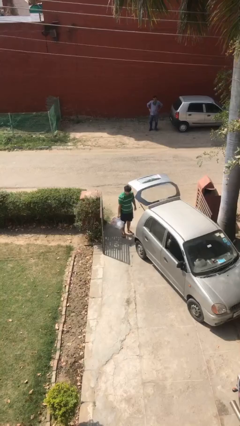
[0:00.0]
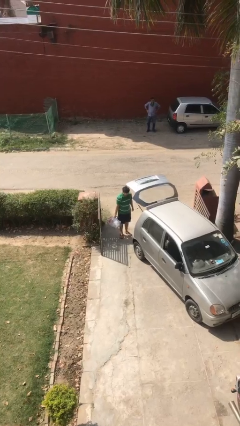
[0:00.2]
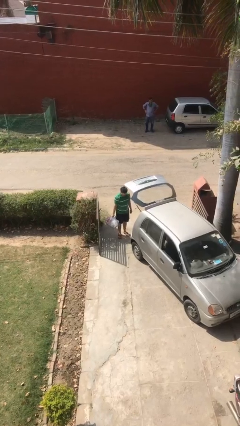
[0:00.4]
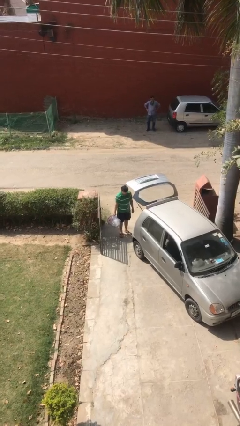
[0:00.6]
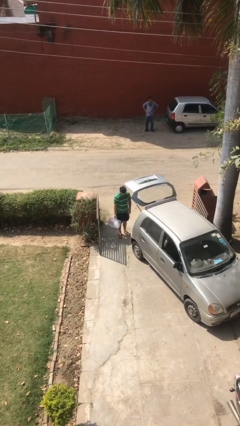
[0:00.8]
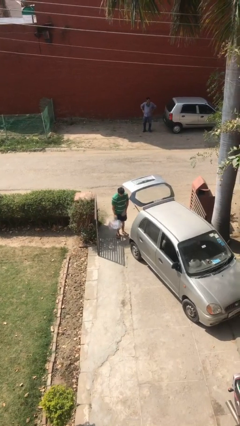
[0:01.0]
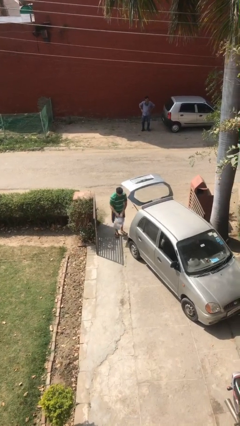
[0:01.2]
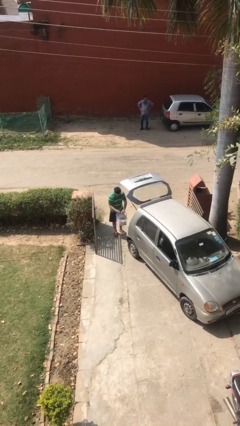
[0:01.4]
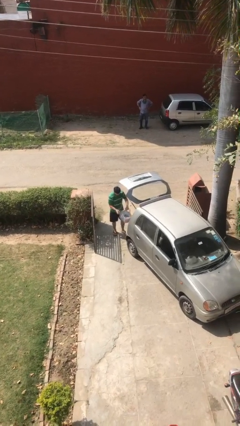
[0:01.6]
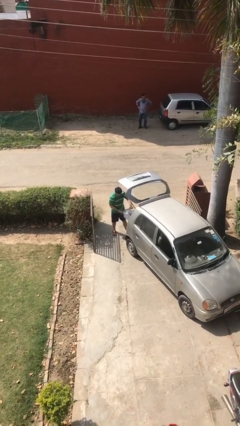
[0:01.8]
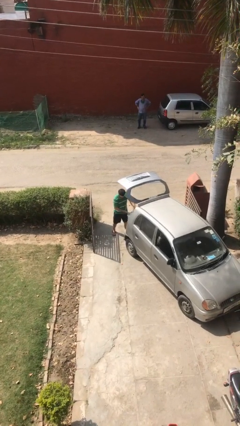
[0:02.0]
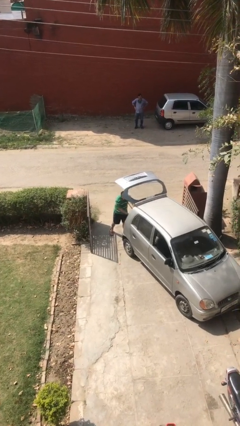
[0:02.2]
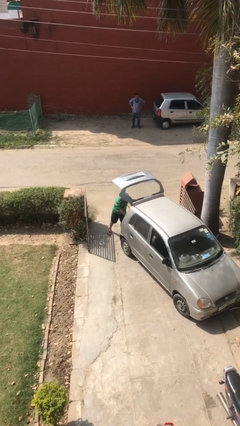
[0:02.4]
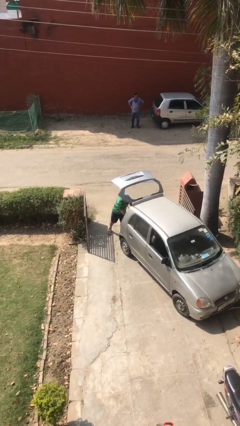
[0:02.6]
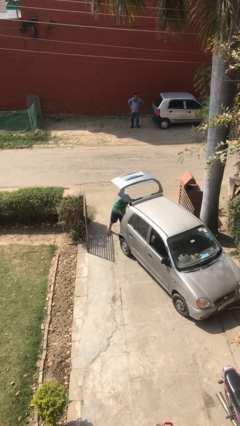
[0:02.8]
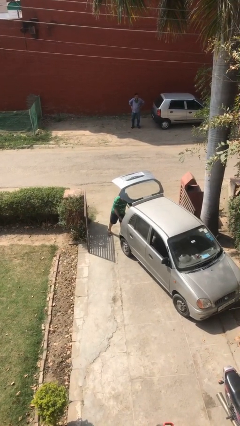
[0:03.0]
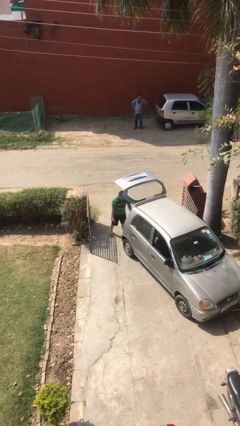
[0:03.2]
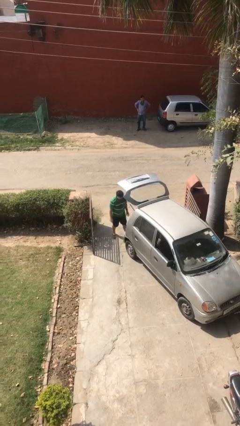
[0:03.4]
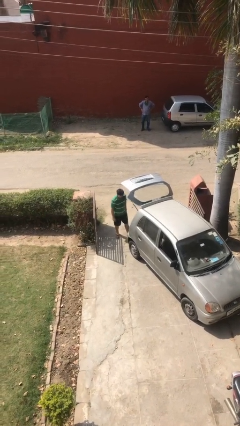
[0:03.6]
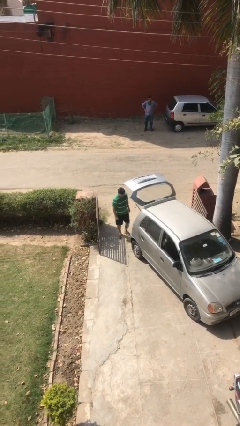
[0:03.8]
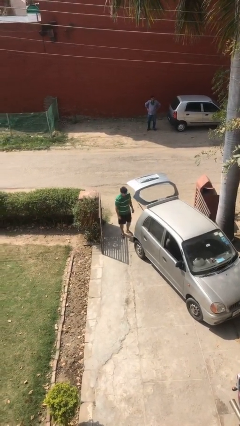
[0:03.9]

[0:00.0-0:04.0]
person loads car

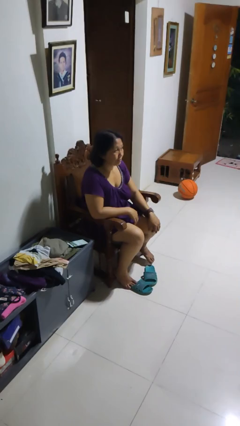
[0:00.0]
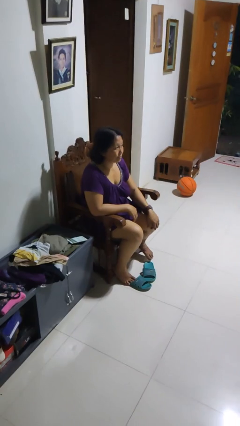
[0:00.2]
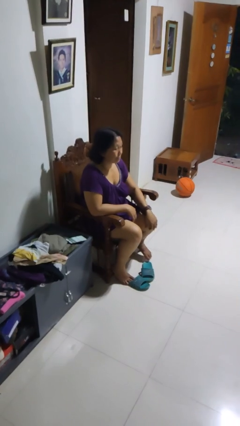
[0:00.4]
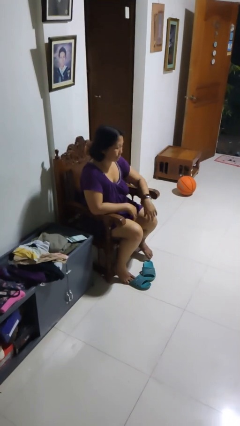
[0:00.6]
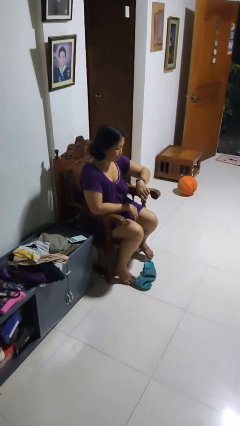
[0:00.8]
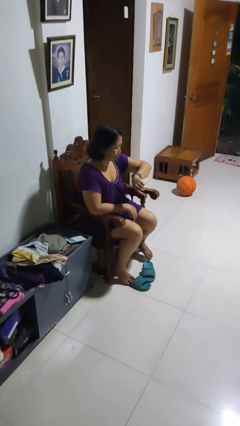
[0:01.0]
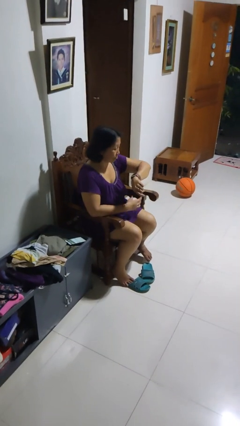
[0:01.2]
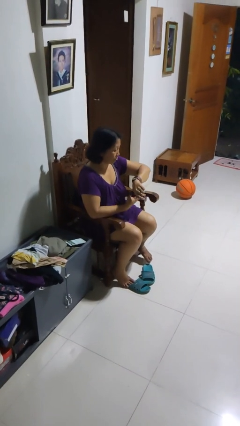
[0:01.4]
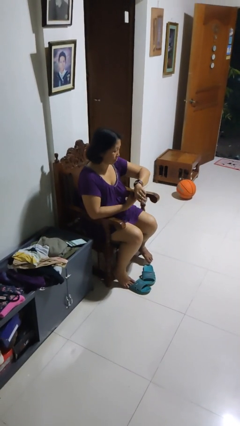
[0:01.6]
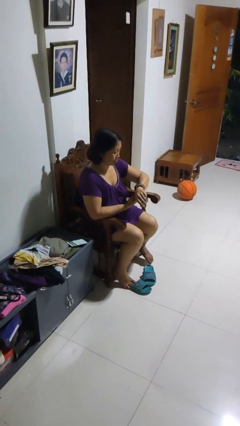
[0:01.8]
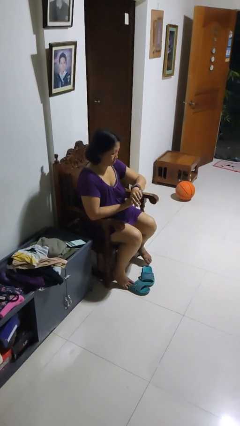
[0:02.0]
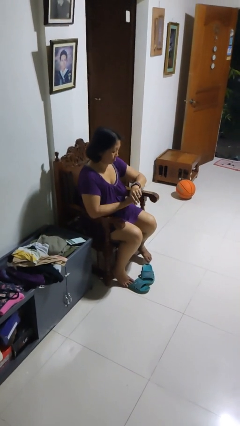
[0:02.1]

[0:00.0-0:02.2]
person looks at wristwatch

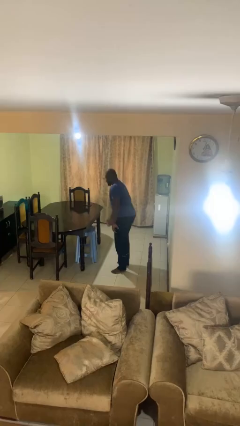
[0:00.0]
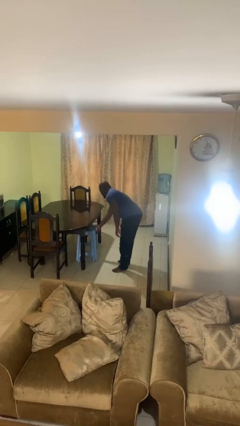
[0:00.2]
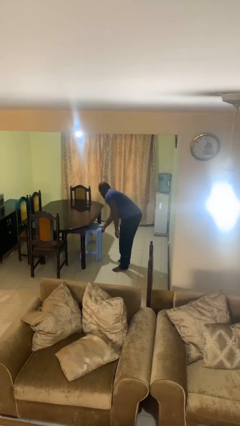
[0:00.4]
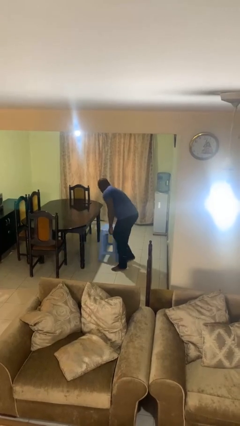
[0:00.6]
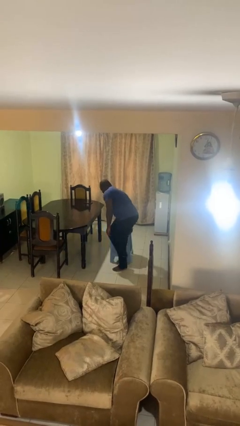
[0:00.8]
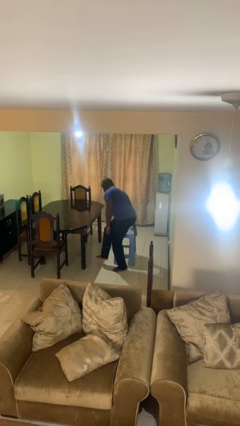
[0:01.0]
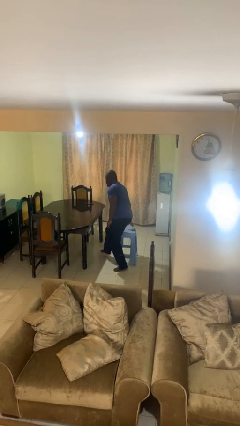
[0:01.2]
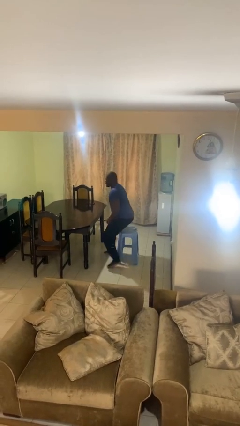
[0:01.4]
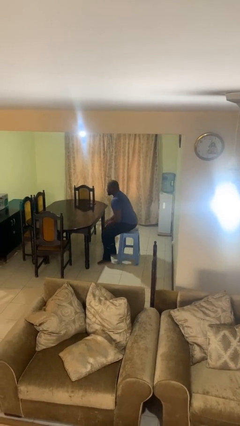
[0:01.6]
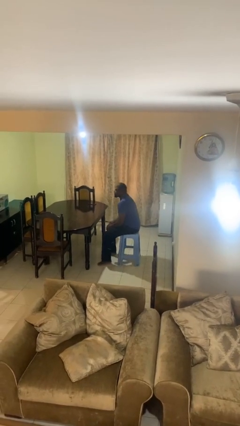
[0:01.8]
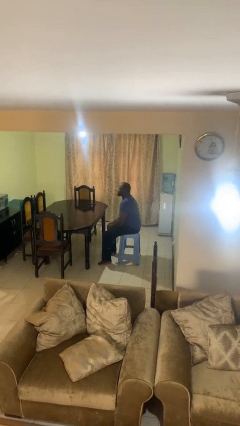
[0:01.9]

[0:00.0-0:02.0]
person sits down

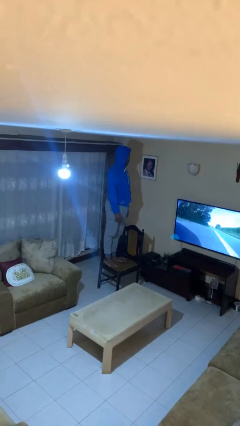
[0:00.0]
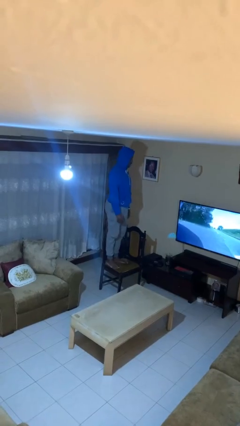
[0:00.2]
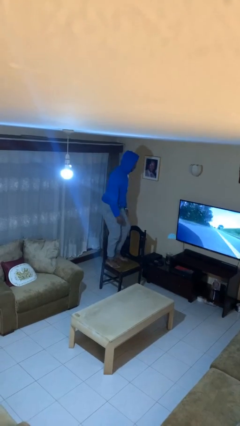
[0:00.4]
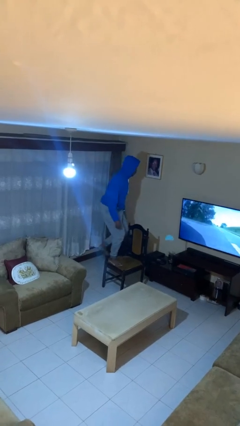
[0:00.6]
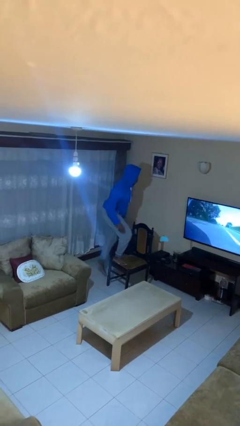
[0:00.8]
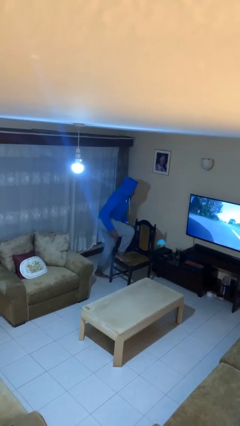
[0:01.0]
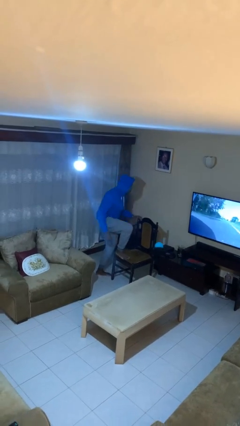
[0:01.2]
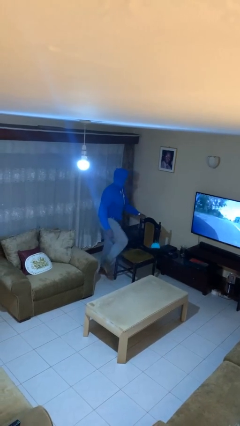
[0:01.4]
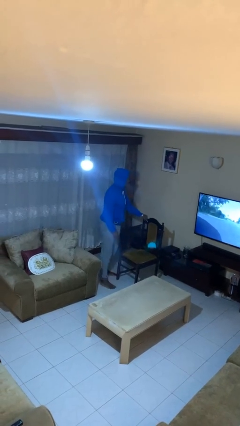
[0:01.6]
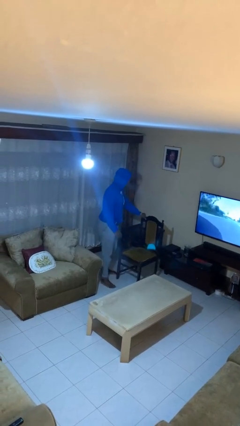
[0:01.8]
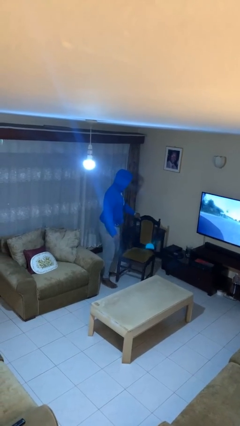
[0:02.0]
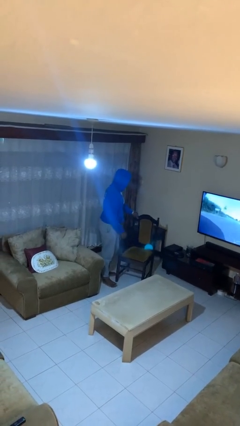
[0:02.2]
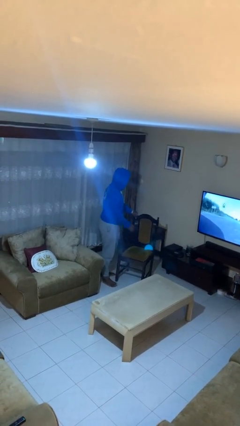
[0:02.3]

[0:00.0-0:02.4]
person climbs off chair

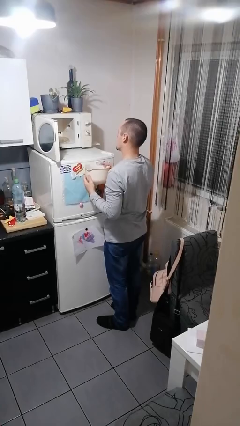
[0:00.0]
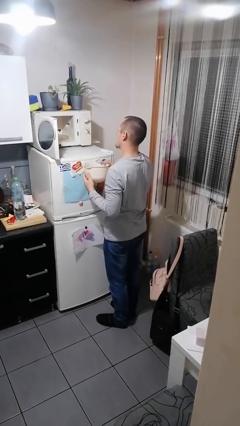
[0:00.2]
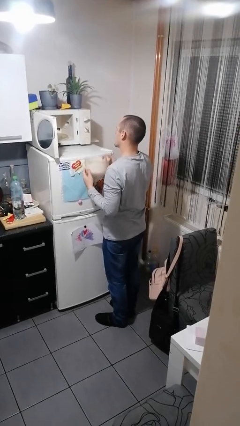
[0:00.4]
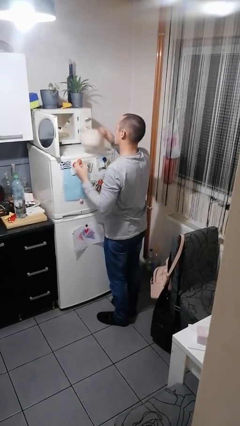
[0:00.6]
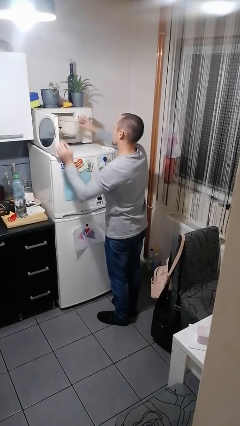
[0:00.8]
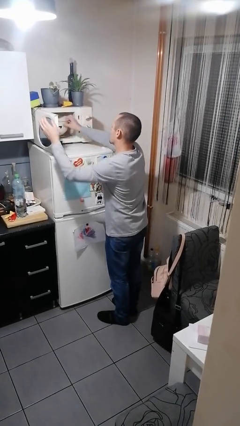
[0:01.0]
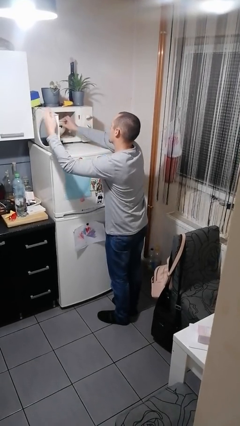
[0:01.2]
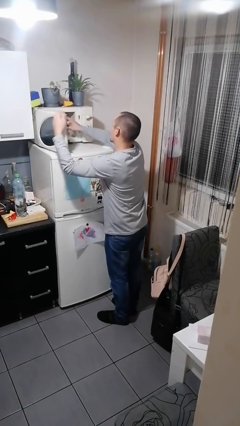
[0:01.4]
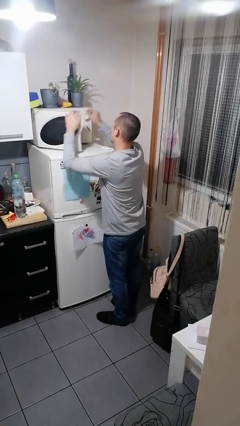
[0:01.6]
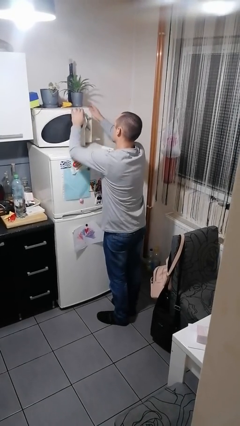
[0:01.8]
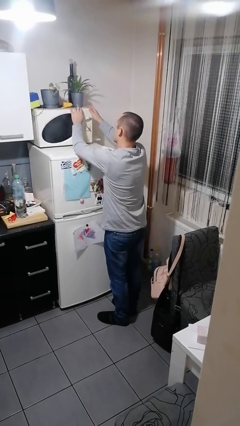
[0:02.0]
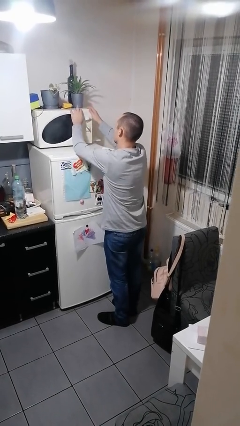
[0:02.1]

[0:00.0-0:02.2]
person puts object into microwave

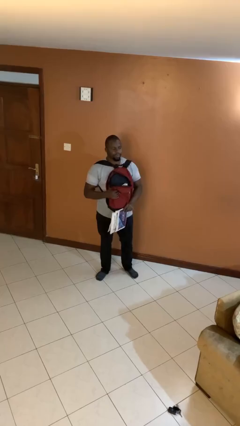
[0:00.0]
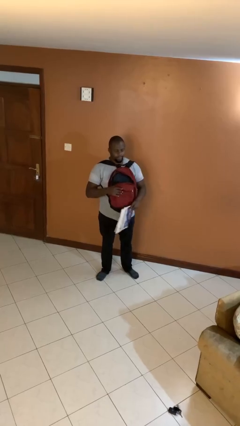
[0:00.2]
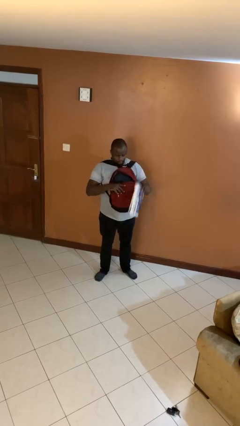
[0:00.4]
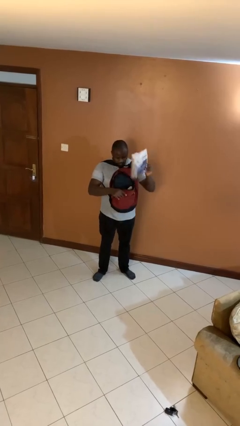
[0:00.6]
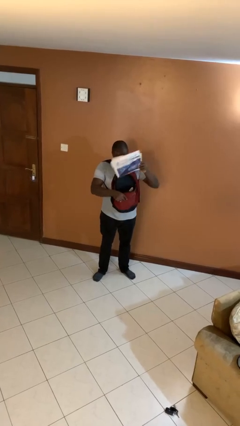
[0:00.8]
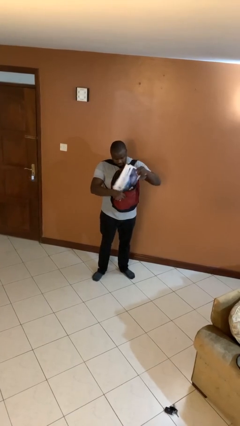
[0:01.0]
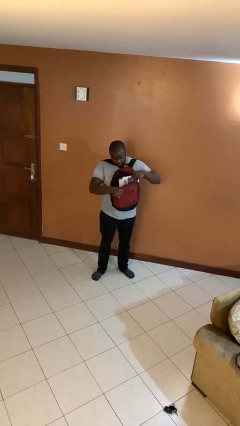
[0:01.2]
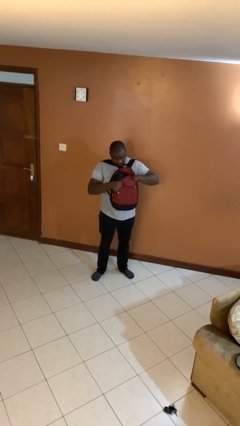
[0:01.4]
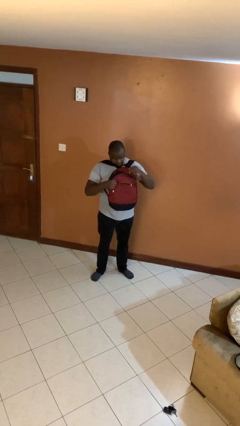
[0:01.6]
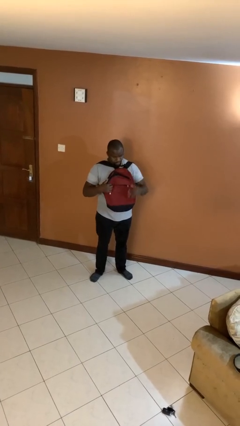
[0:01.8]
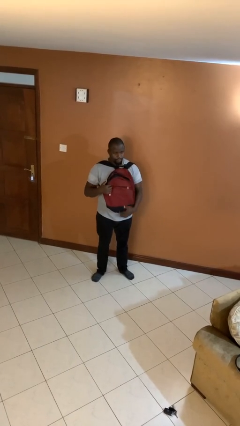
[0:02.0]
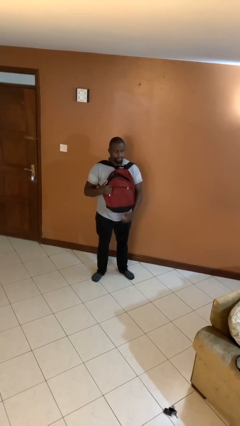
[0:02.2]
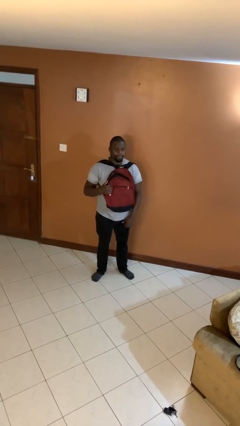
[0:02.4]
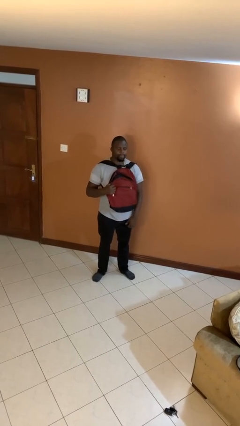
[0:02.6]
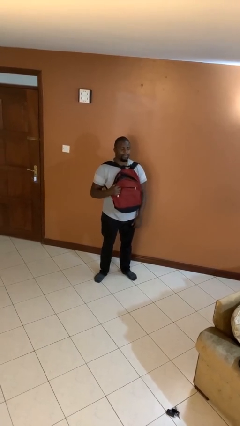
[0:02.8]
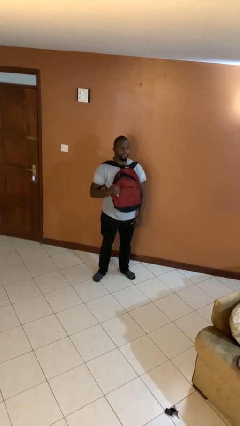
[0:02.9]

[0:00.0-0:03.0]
person puts object into backpack

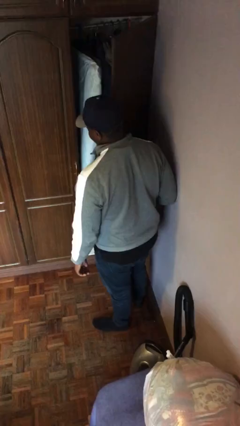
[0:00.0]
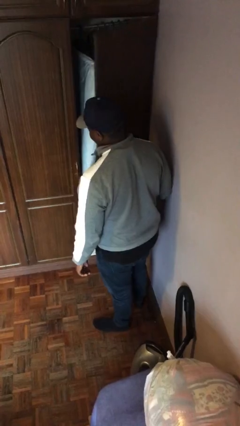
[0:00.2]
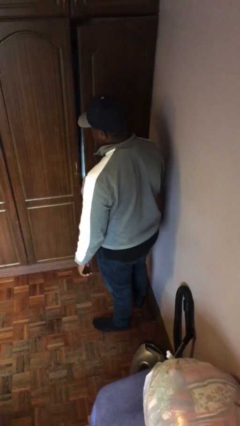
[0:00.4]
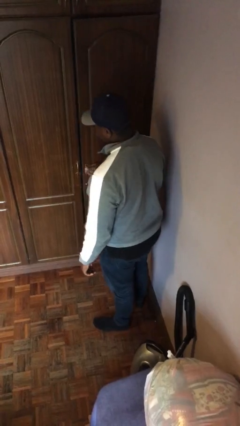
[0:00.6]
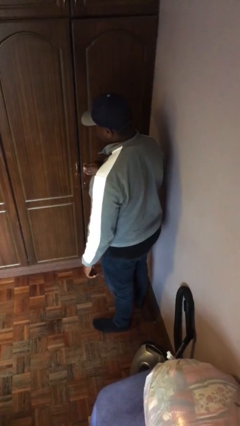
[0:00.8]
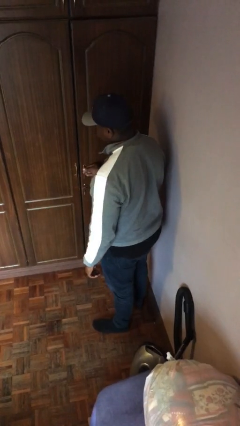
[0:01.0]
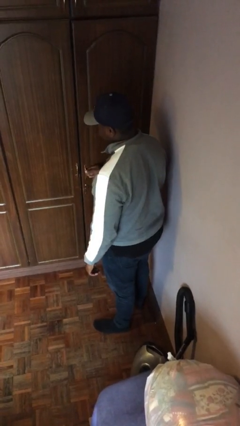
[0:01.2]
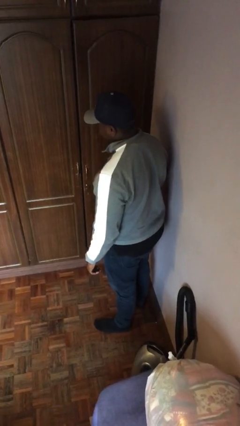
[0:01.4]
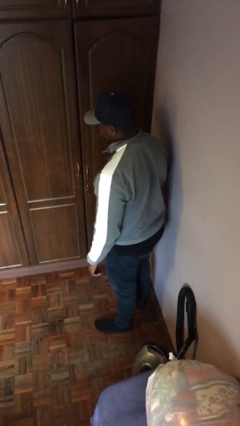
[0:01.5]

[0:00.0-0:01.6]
person closes closet door
